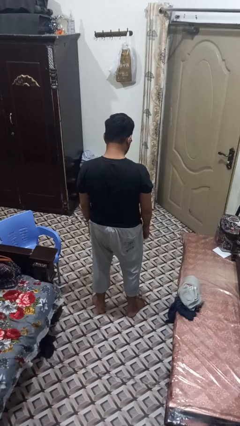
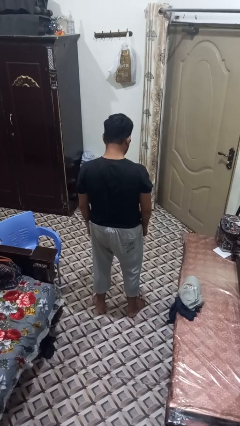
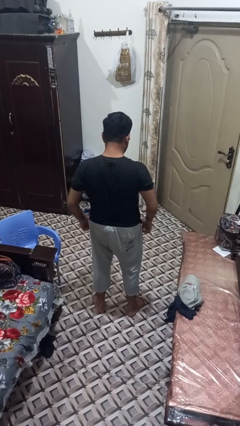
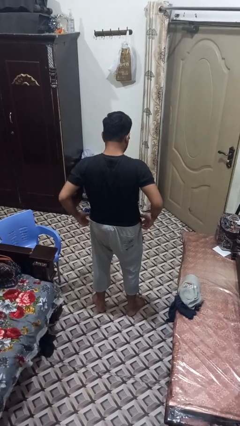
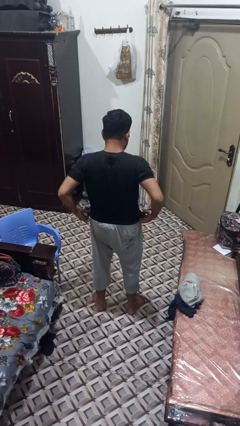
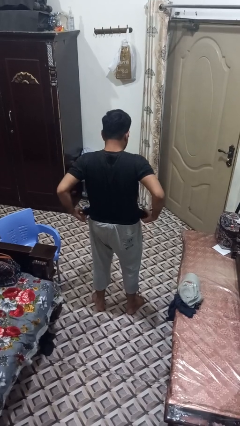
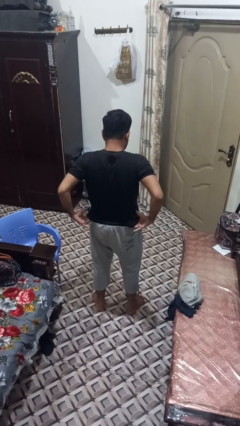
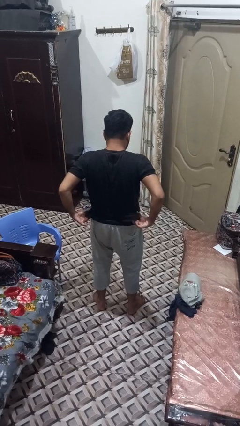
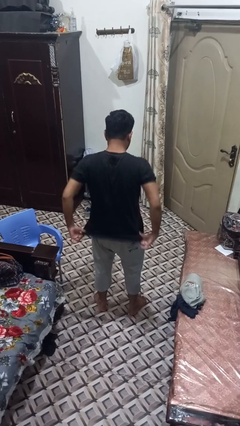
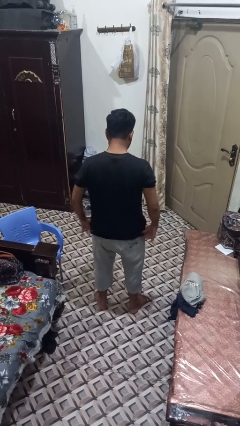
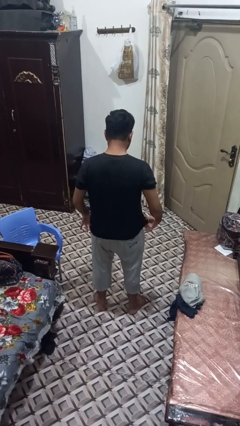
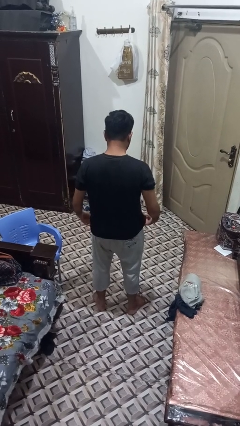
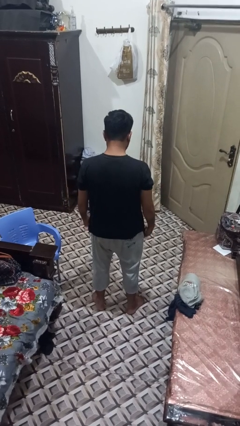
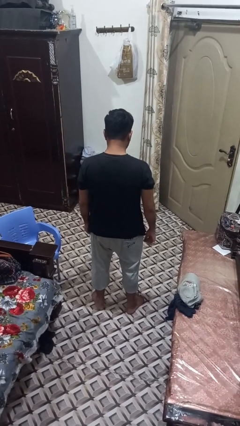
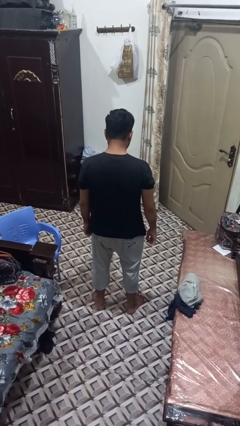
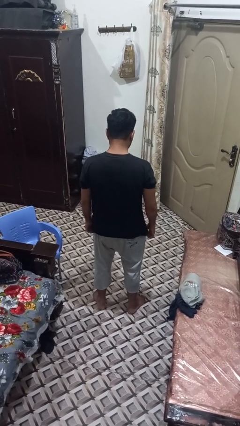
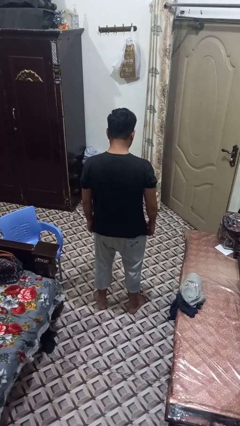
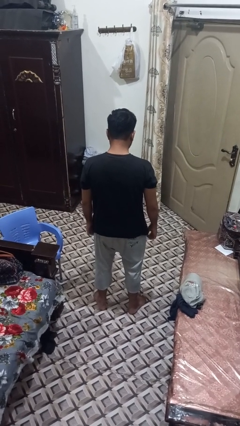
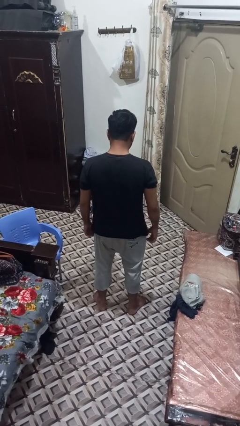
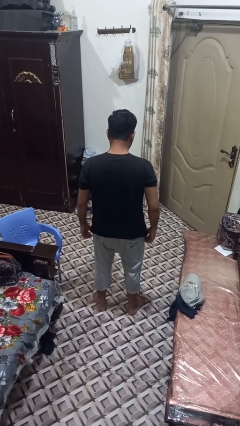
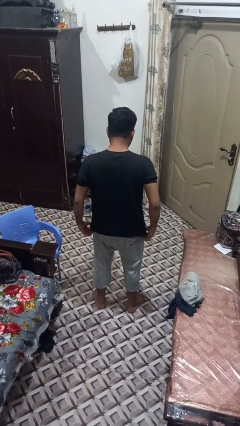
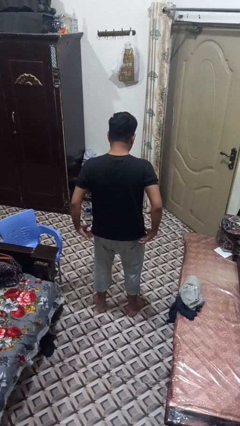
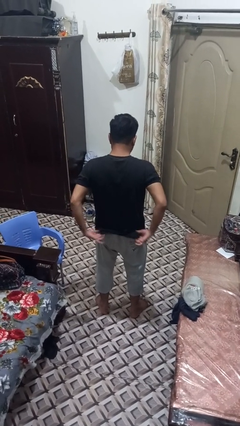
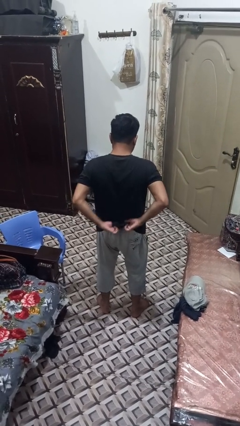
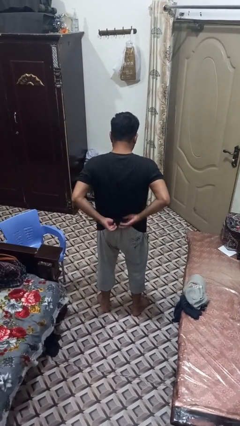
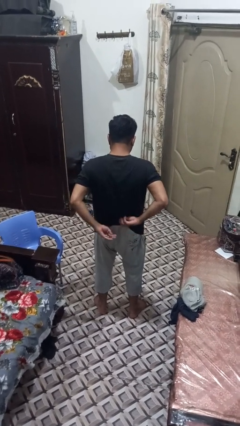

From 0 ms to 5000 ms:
person untucks shirt

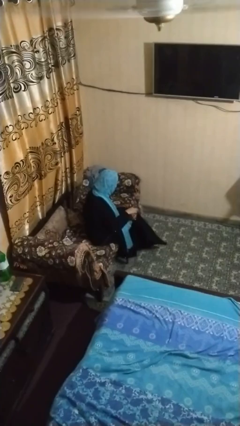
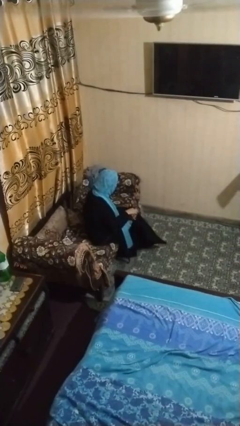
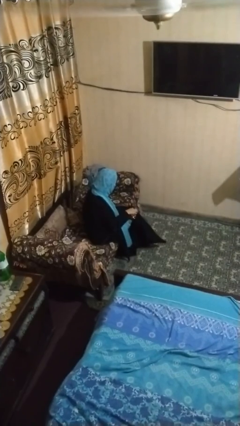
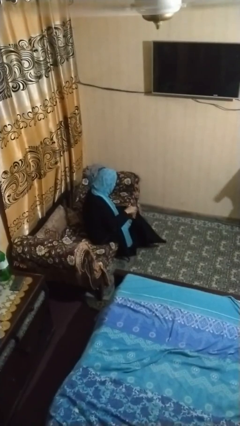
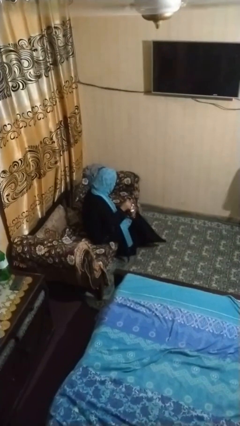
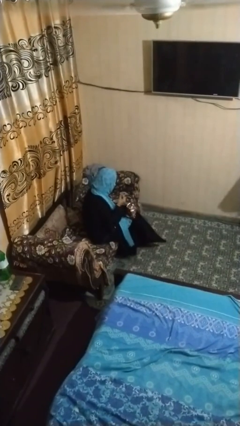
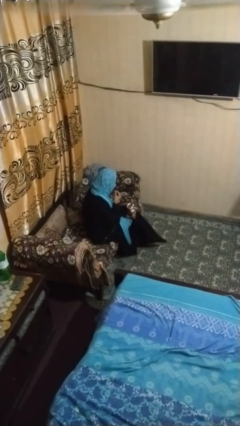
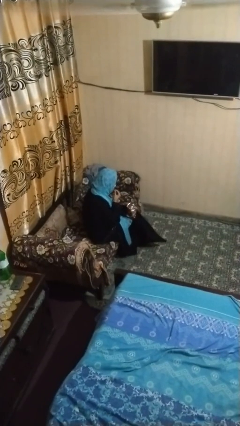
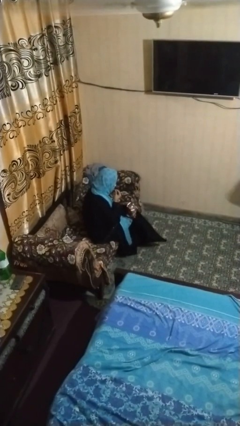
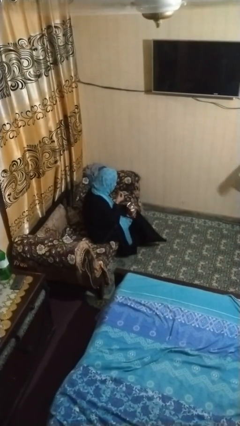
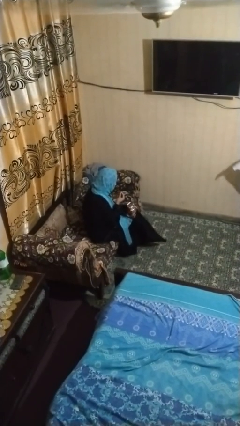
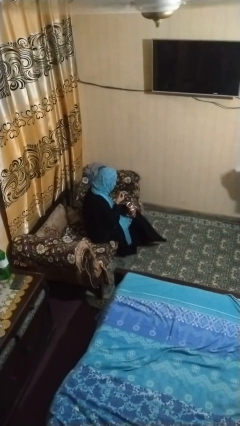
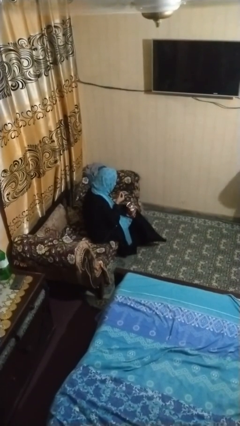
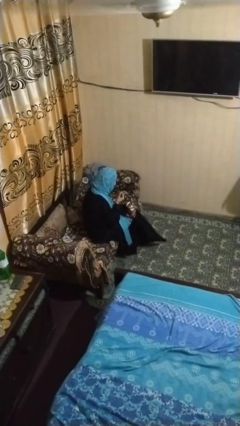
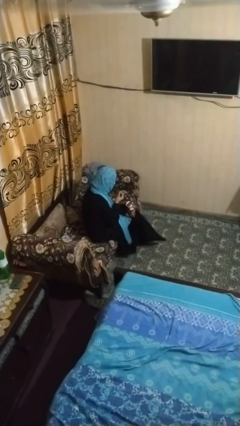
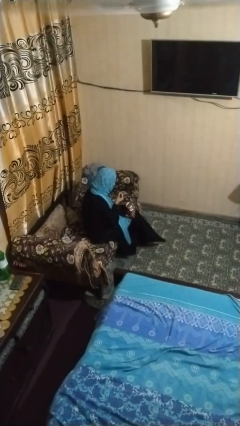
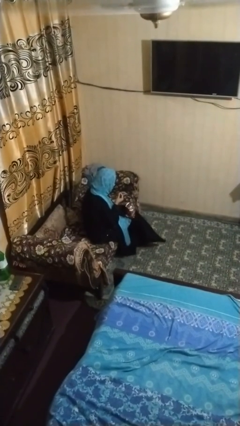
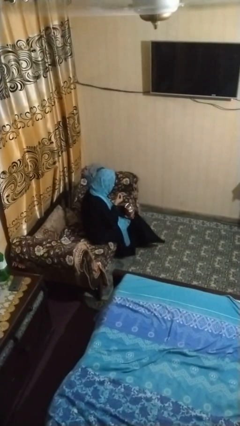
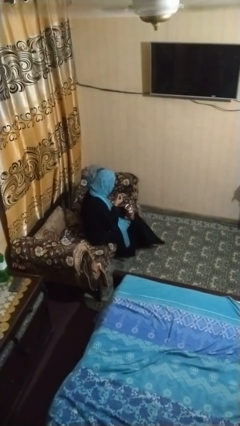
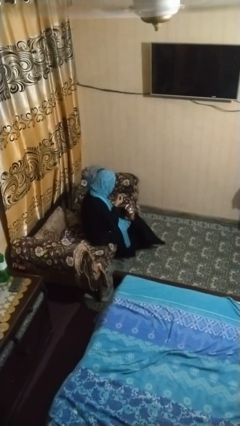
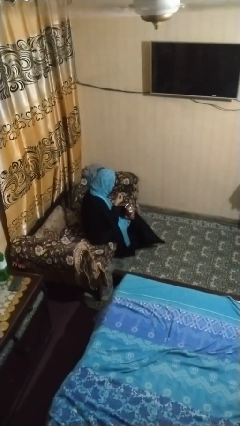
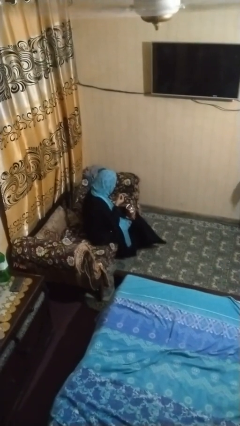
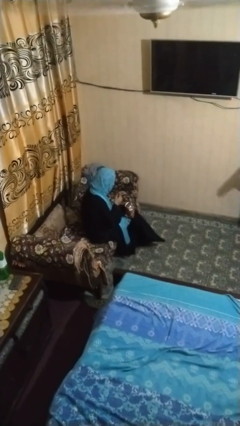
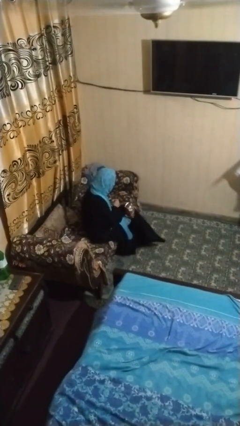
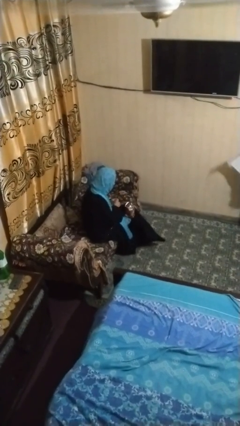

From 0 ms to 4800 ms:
person eats snack from bag

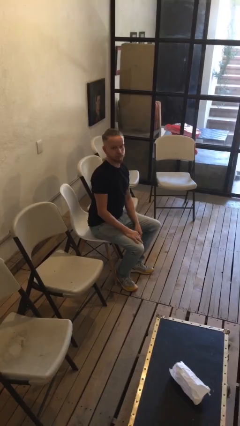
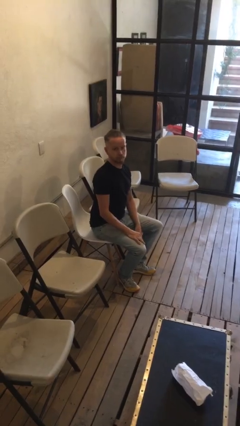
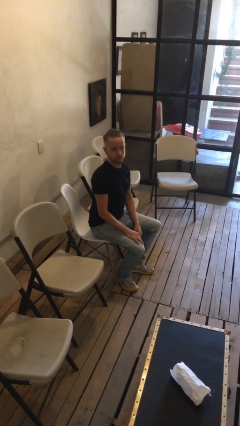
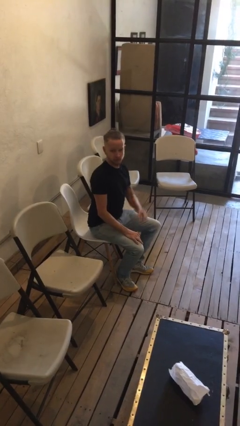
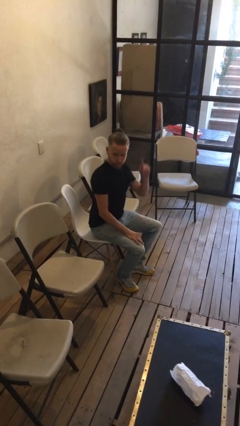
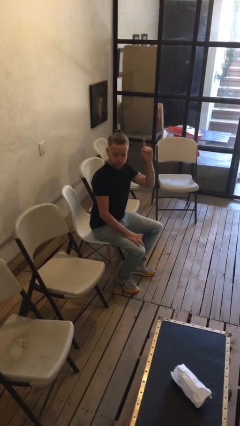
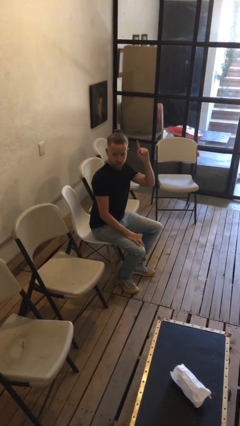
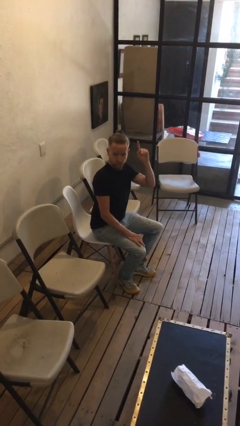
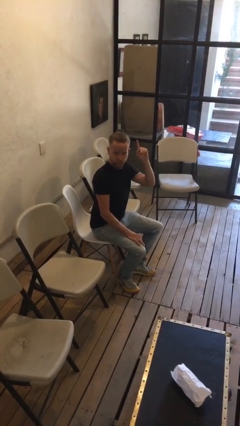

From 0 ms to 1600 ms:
person gestures raise hand

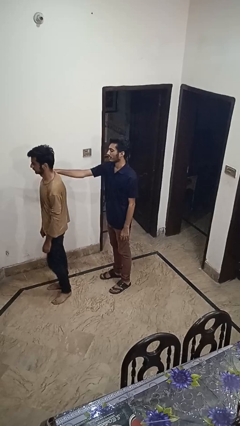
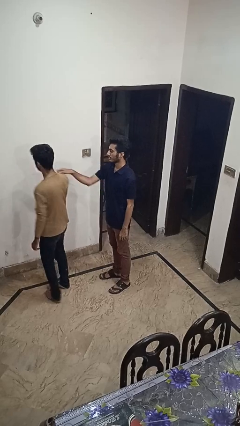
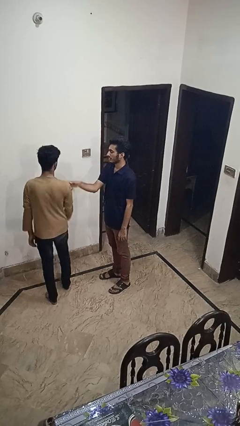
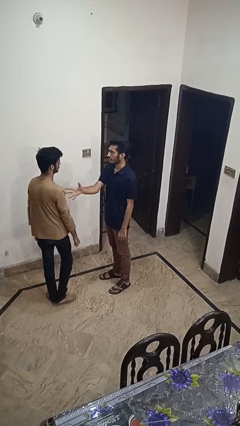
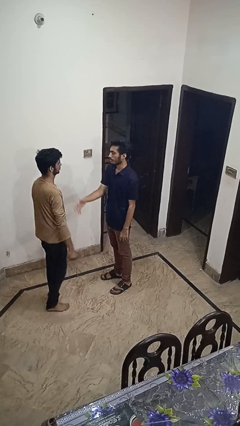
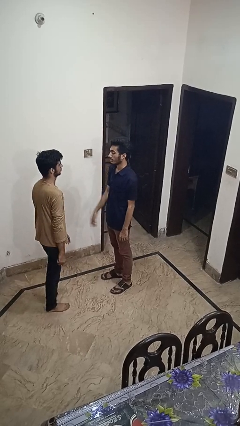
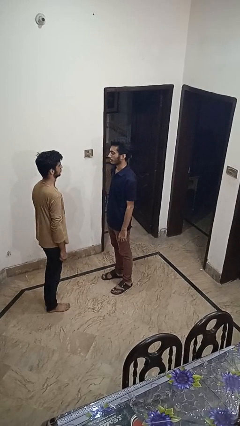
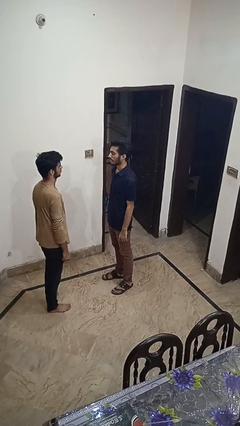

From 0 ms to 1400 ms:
person spins person around

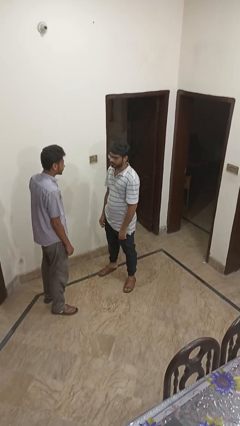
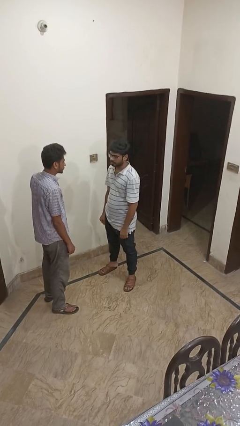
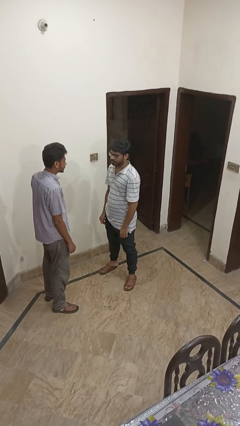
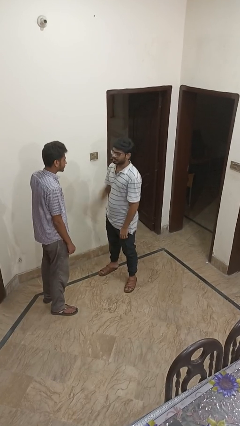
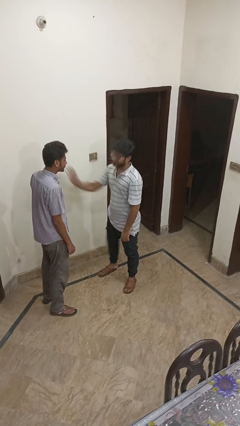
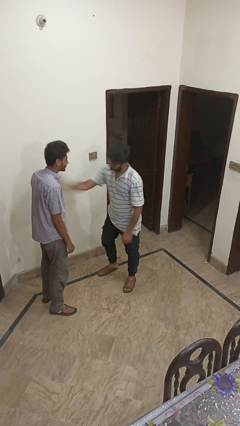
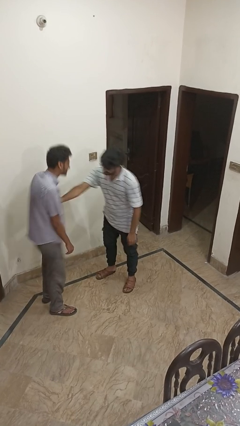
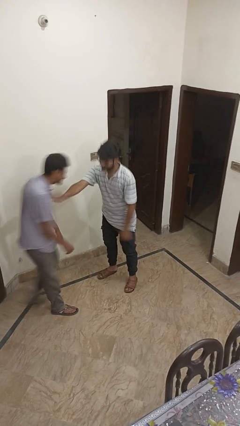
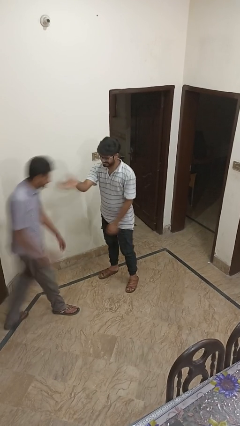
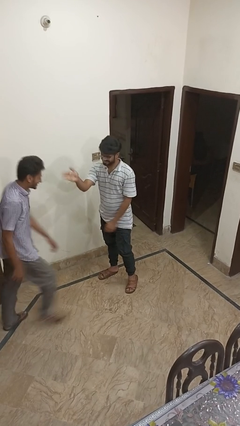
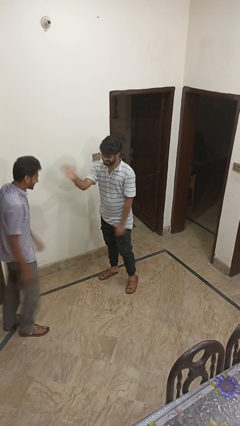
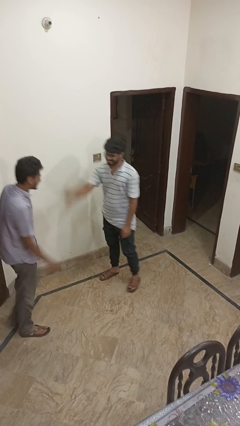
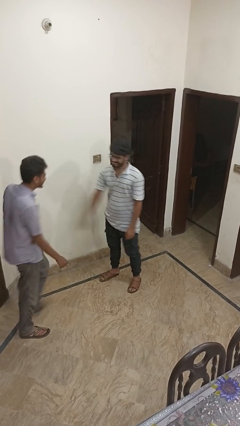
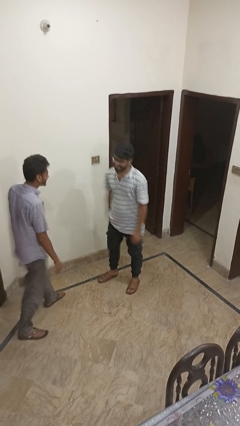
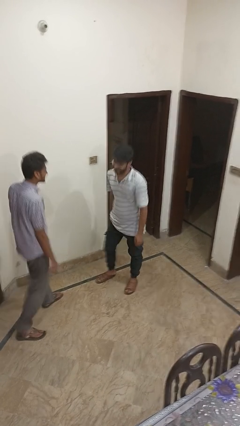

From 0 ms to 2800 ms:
person shoves person

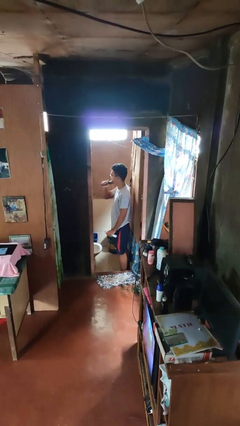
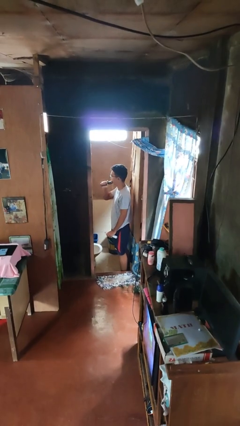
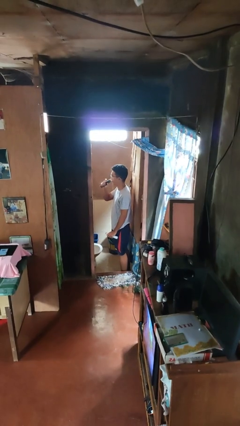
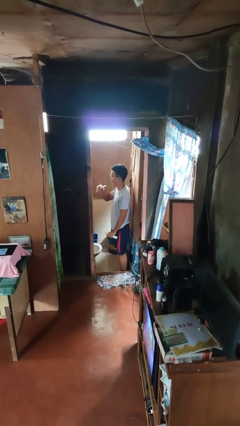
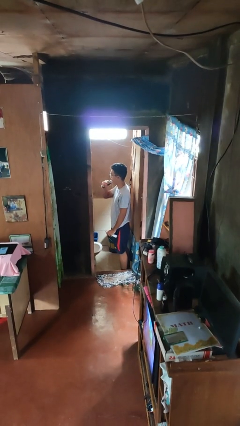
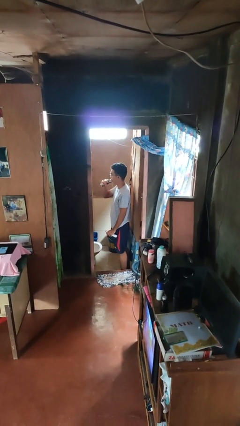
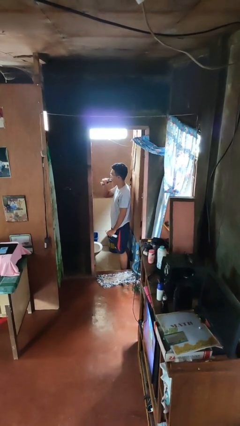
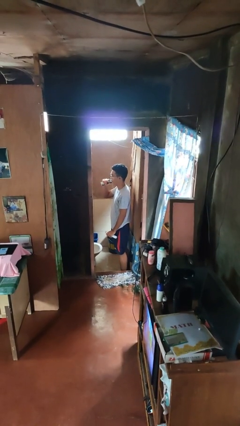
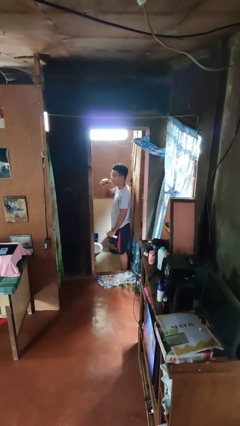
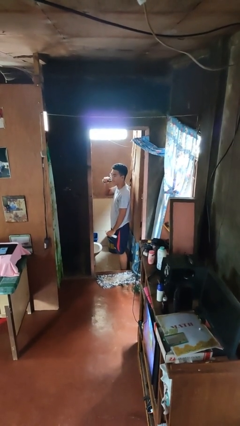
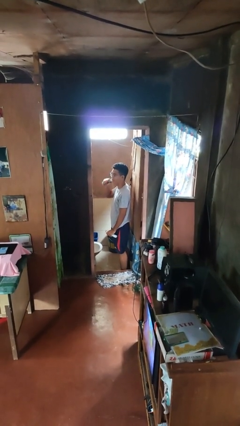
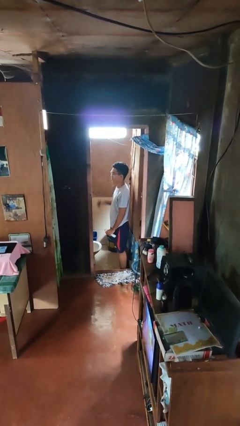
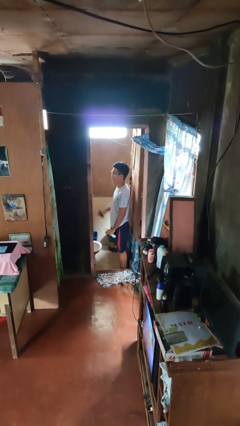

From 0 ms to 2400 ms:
person shaves face
